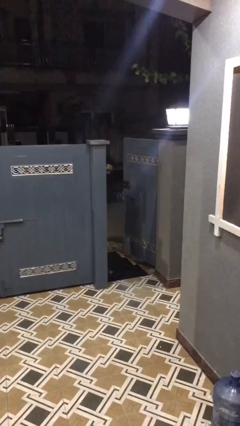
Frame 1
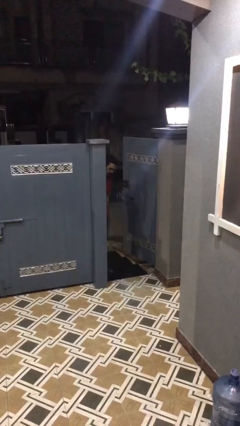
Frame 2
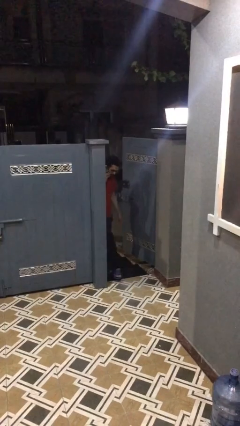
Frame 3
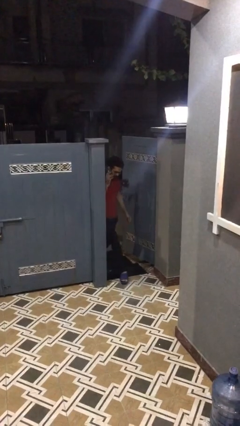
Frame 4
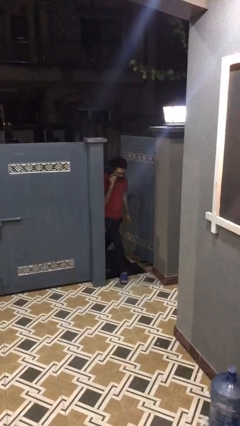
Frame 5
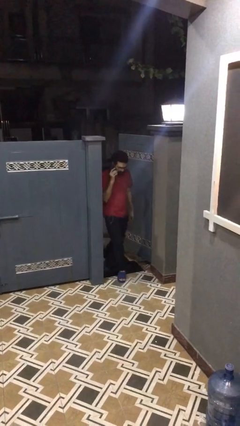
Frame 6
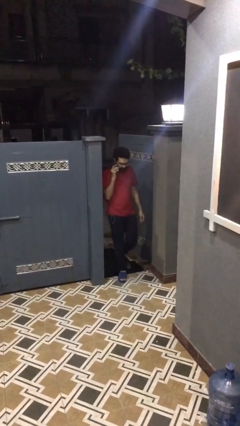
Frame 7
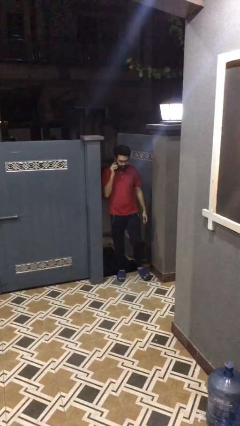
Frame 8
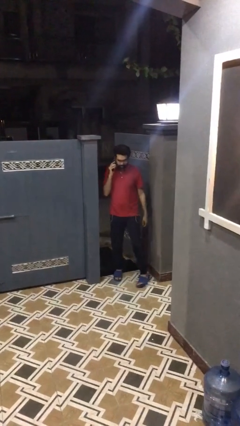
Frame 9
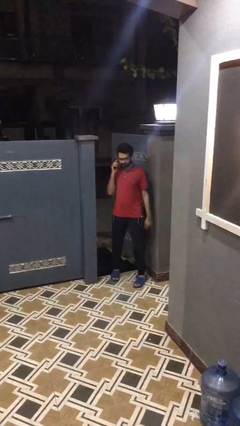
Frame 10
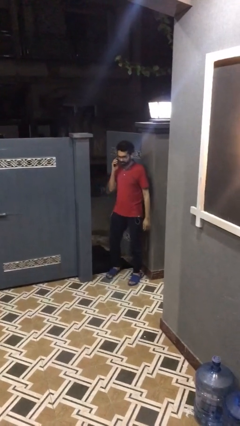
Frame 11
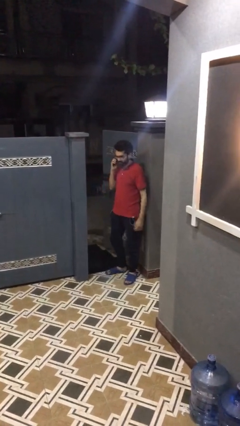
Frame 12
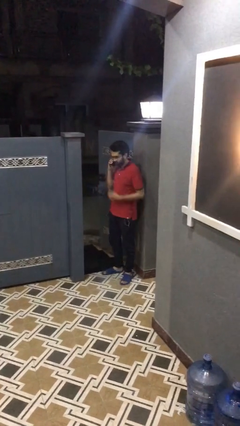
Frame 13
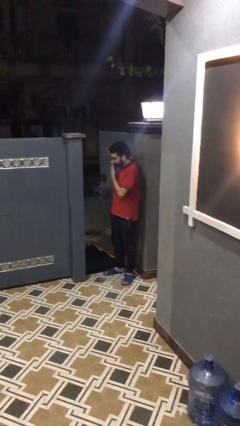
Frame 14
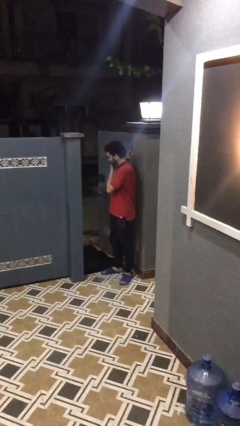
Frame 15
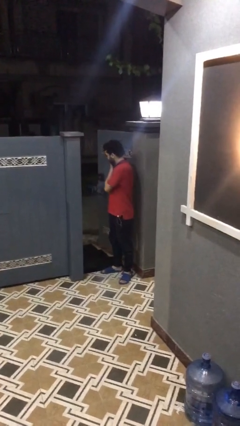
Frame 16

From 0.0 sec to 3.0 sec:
person enters scene through structure

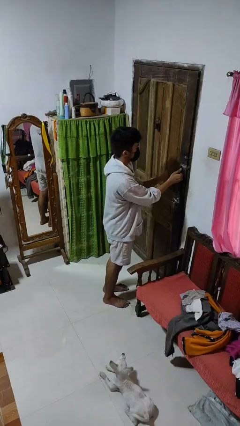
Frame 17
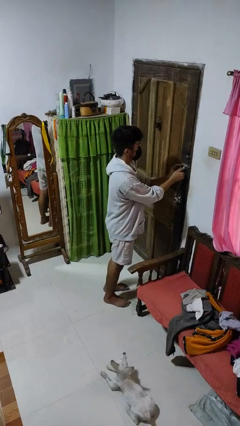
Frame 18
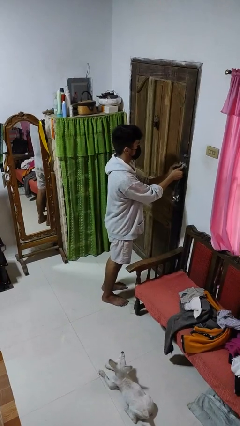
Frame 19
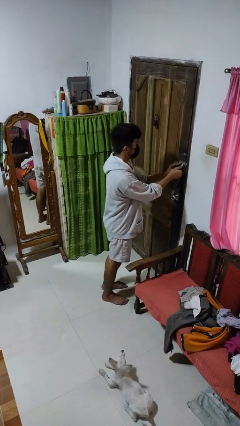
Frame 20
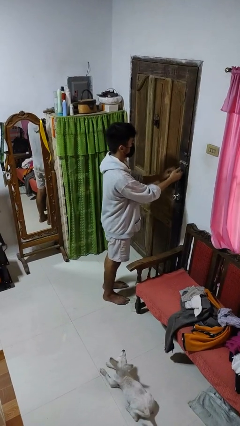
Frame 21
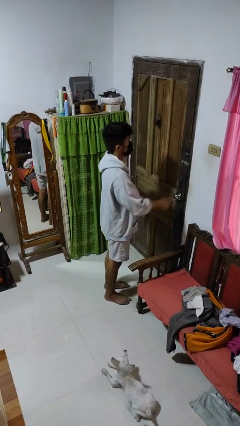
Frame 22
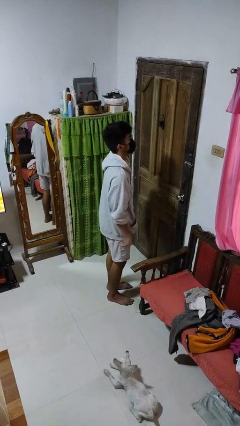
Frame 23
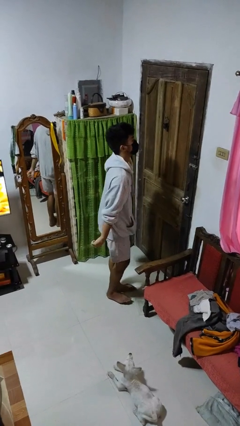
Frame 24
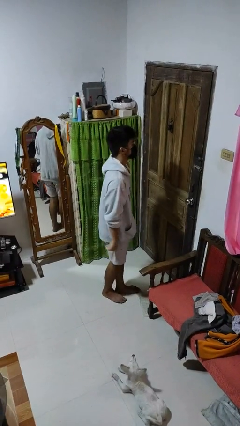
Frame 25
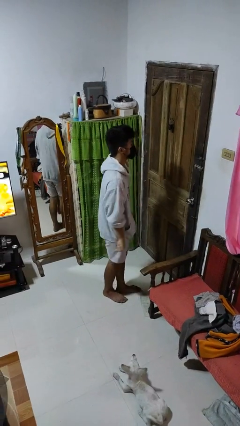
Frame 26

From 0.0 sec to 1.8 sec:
person locks door with keys

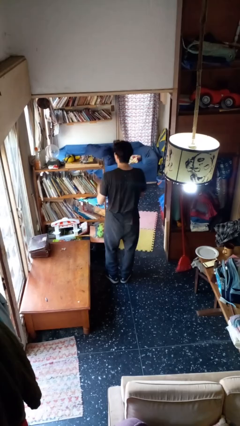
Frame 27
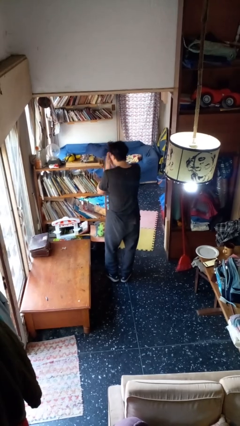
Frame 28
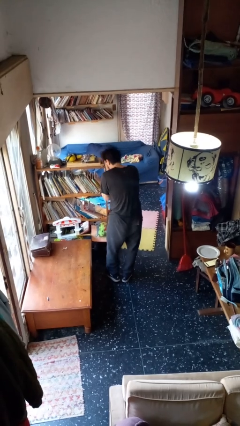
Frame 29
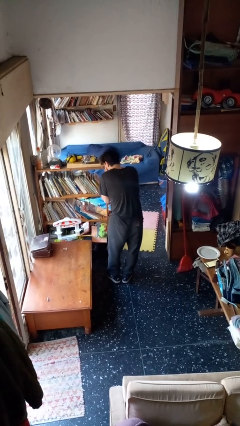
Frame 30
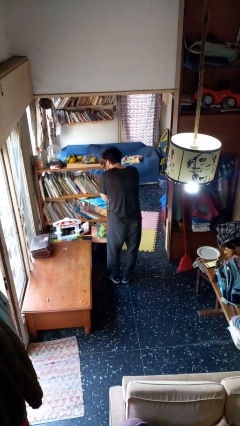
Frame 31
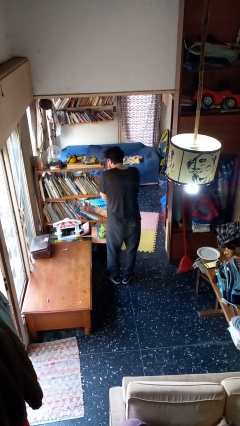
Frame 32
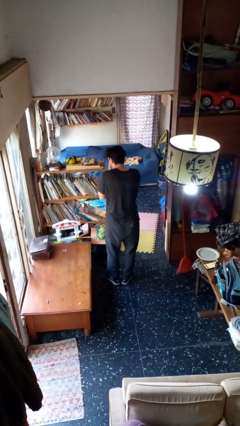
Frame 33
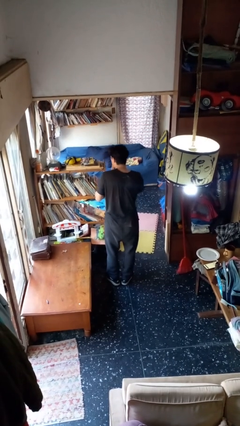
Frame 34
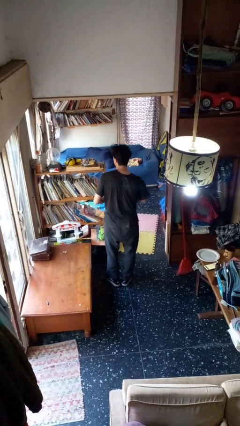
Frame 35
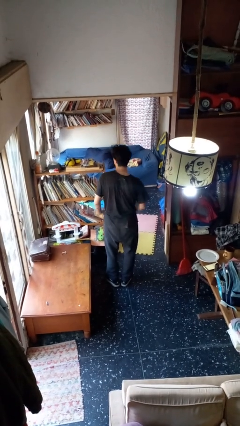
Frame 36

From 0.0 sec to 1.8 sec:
person sneezes into hand

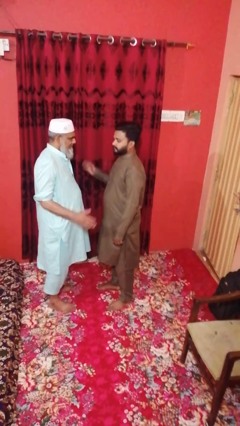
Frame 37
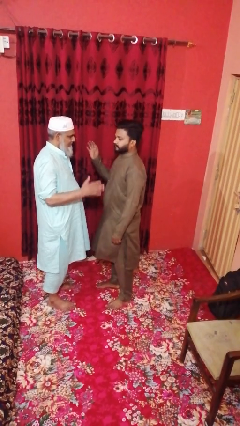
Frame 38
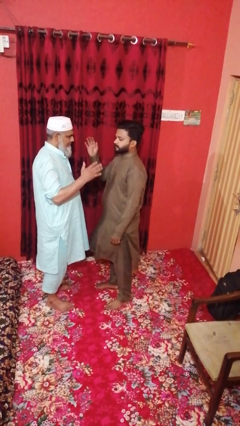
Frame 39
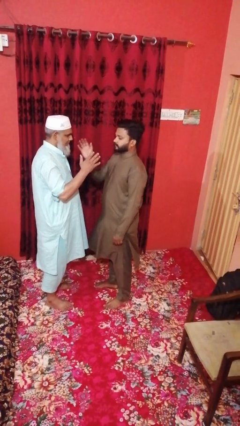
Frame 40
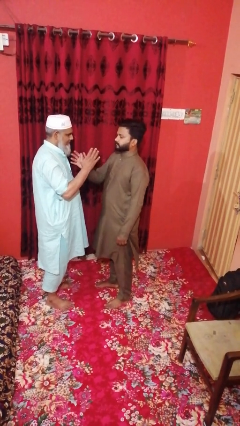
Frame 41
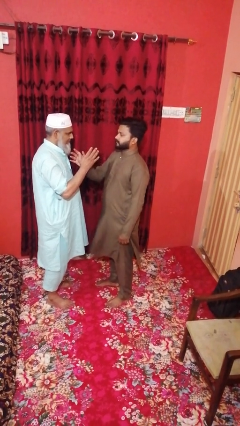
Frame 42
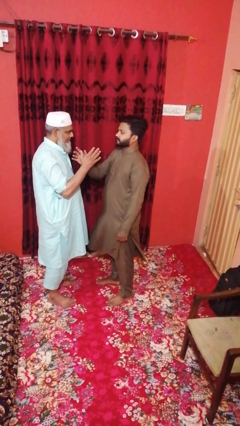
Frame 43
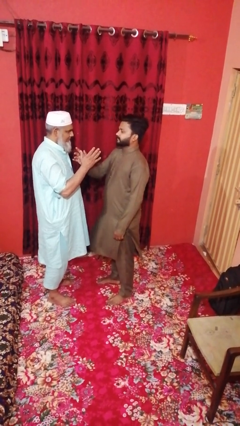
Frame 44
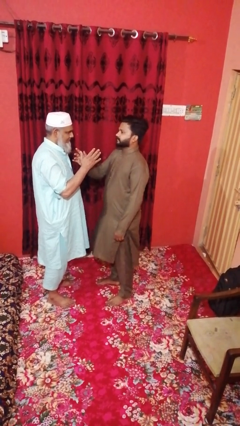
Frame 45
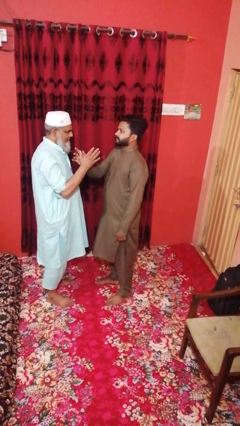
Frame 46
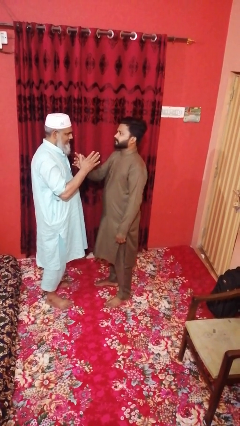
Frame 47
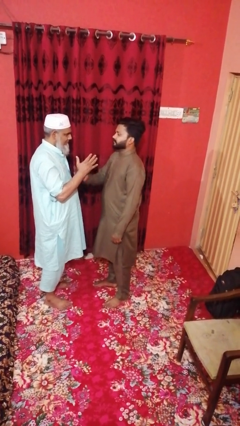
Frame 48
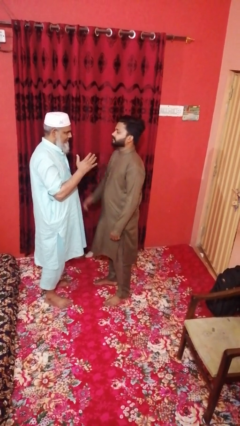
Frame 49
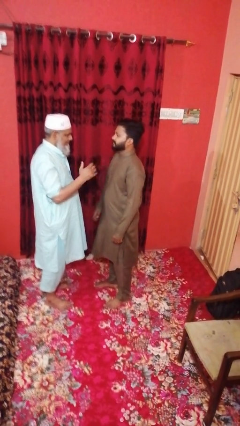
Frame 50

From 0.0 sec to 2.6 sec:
person highfives hand

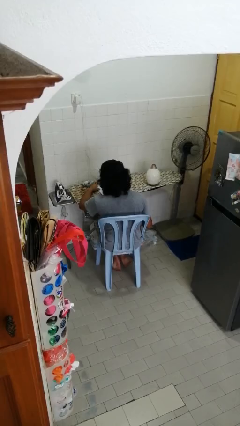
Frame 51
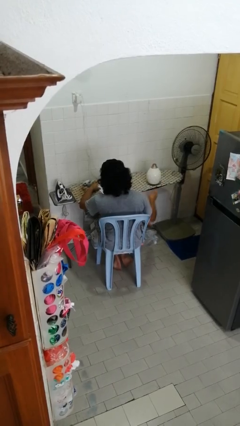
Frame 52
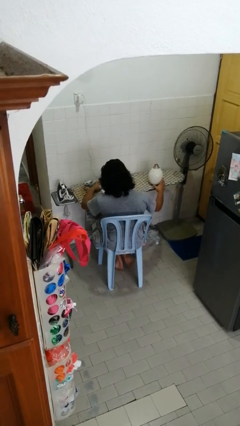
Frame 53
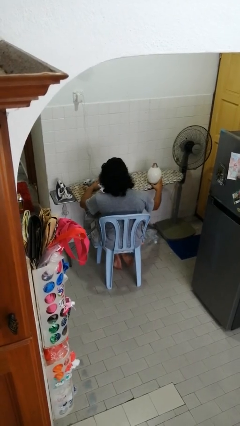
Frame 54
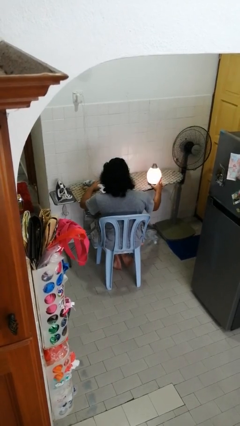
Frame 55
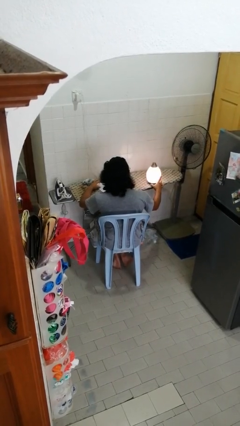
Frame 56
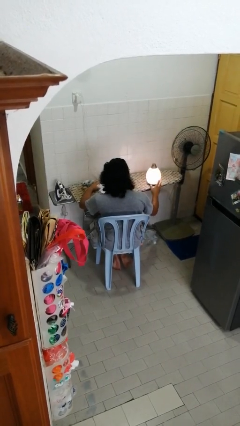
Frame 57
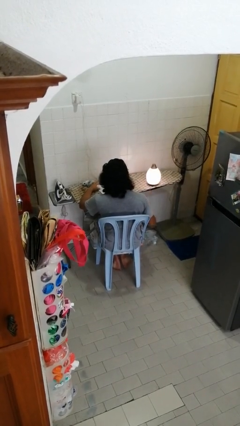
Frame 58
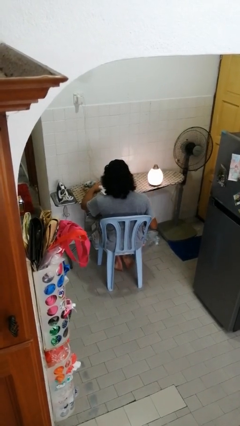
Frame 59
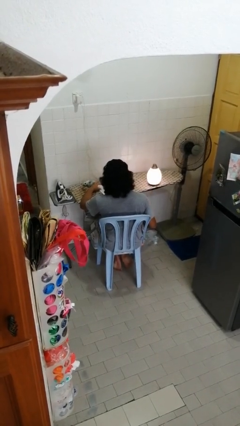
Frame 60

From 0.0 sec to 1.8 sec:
person turns on lamp

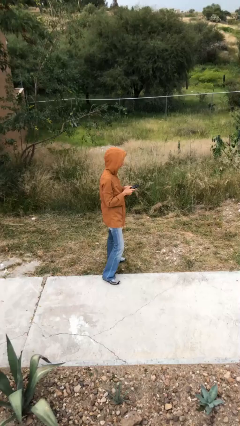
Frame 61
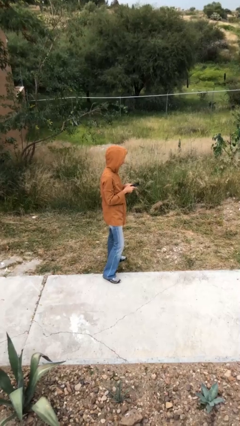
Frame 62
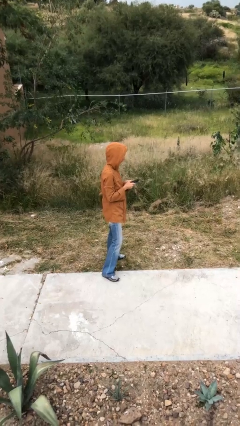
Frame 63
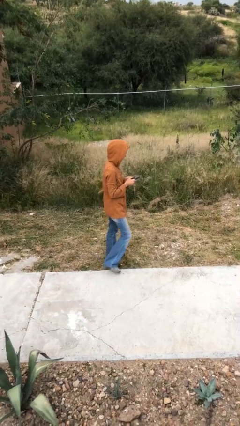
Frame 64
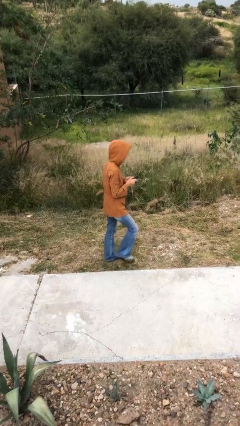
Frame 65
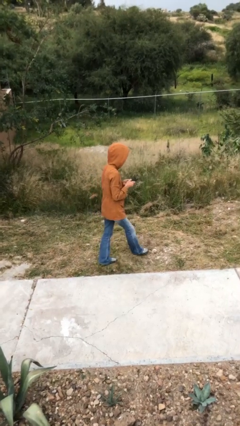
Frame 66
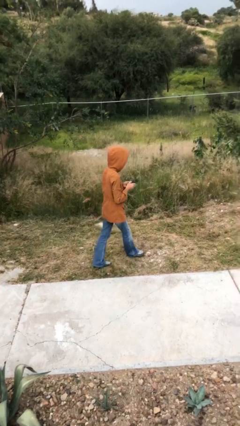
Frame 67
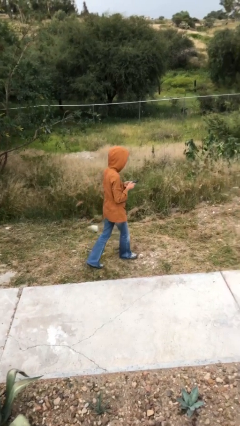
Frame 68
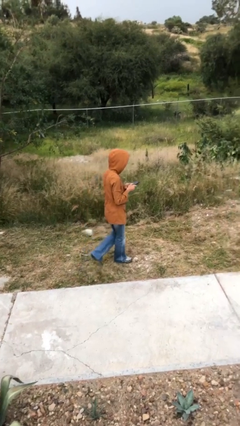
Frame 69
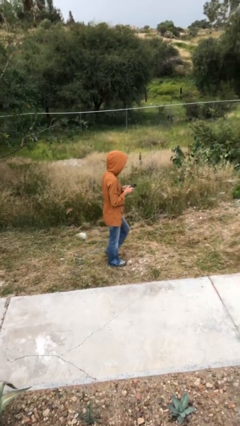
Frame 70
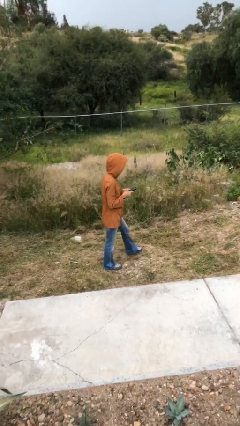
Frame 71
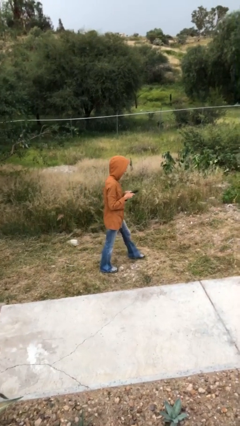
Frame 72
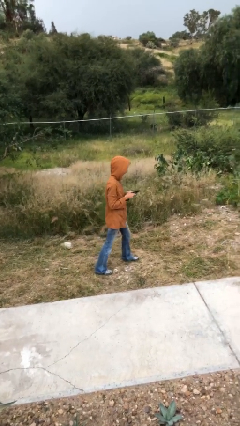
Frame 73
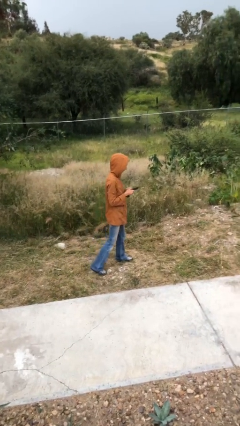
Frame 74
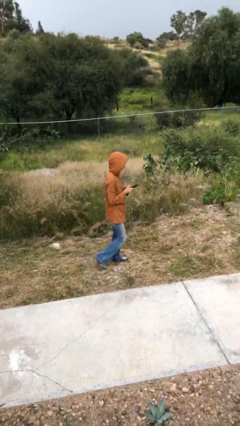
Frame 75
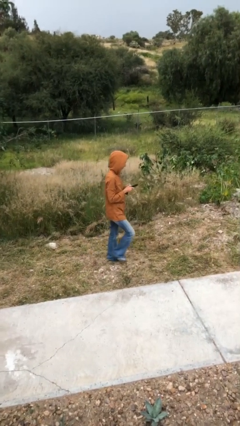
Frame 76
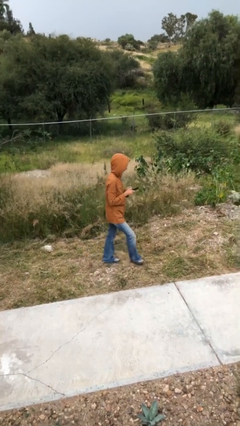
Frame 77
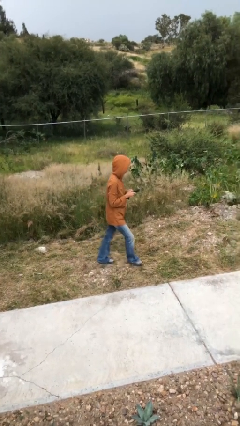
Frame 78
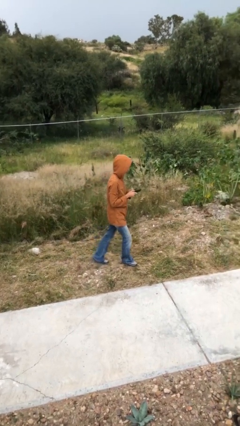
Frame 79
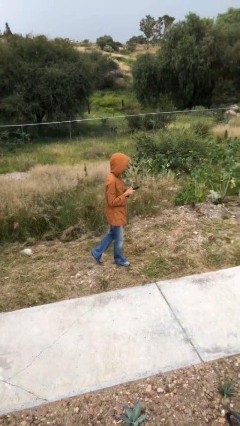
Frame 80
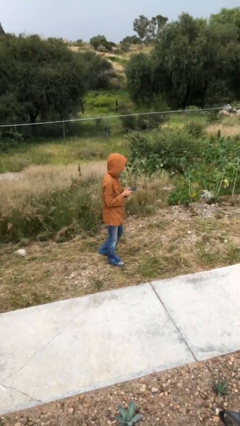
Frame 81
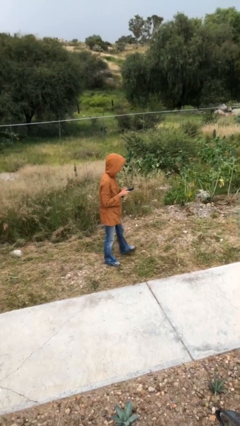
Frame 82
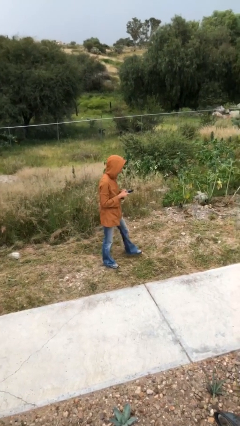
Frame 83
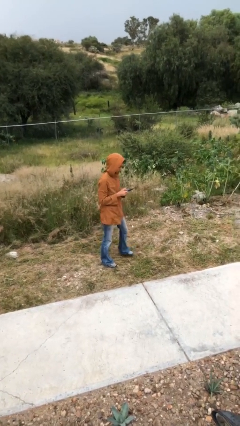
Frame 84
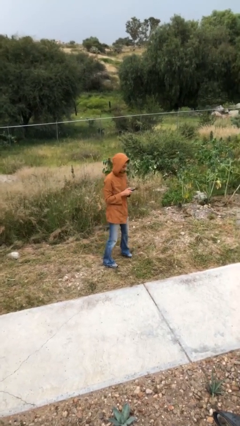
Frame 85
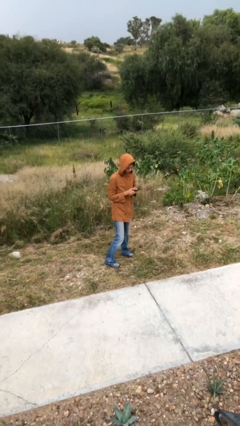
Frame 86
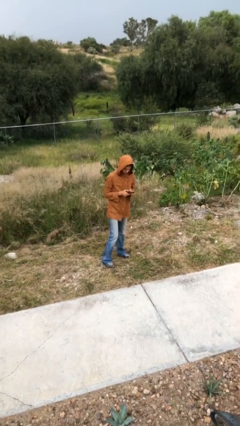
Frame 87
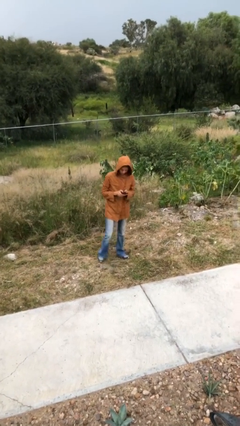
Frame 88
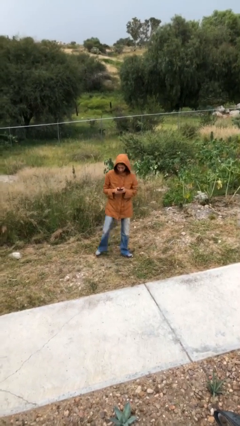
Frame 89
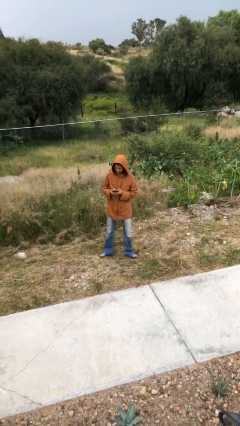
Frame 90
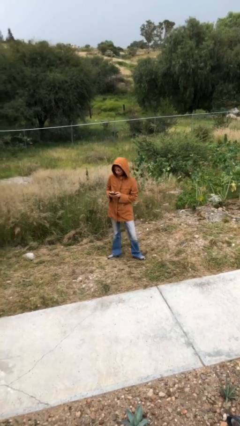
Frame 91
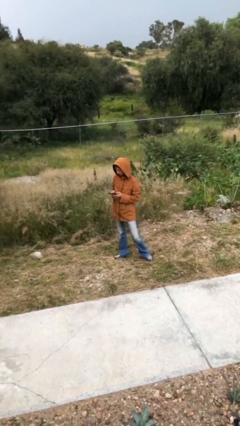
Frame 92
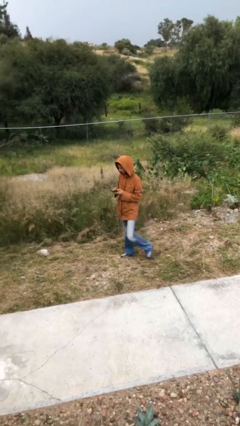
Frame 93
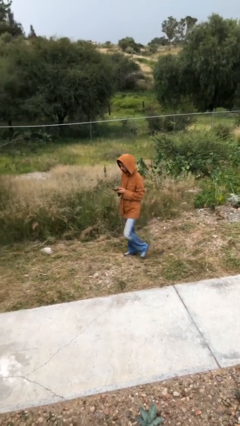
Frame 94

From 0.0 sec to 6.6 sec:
person texts on phone
